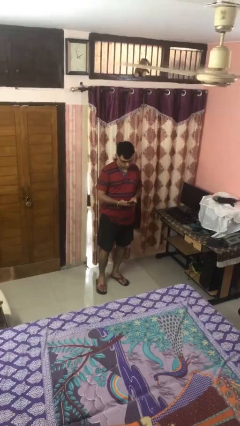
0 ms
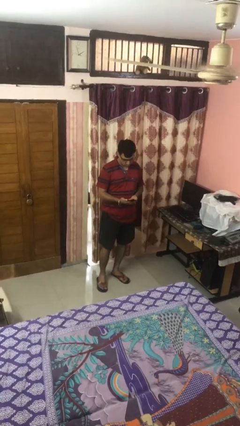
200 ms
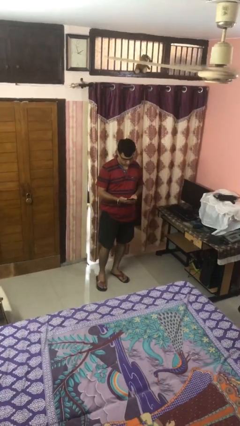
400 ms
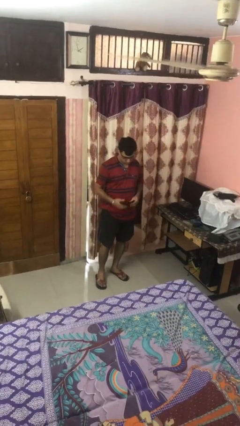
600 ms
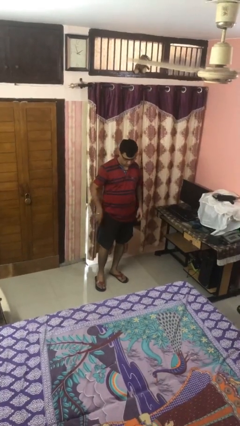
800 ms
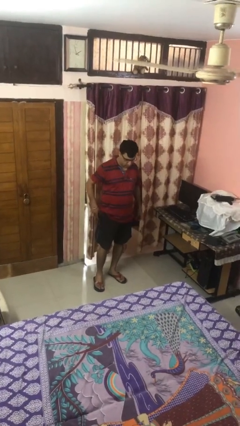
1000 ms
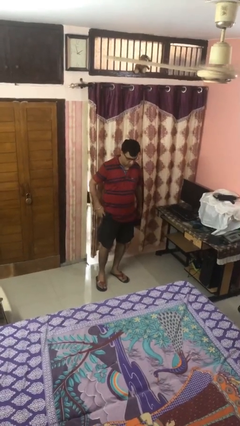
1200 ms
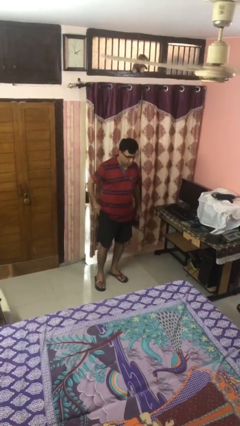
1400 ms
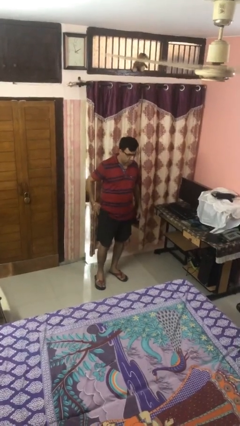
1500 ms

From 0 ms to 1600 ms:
person puts phone into pocket

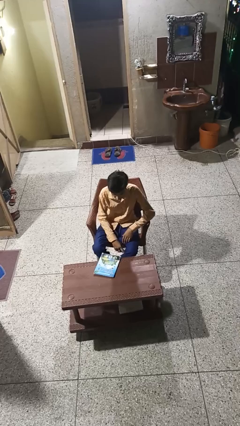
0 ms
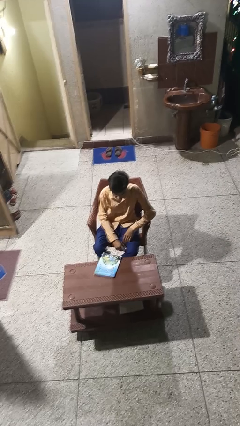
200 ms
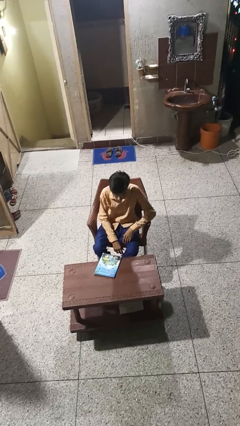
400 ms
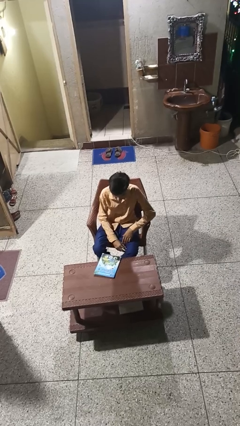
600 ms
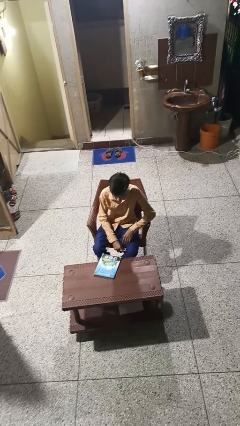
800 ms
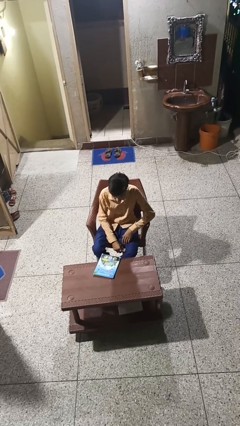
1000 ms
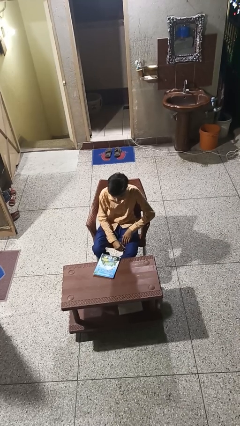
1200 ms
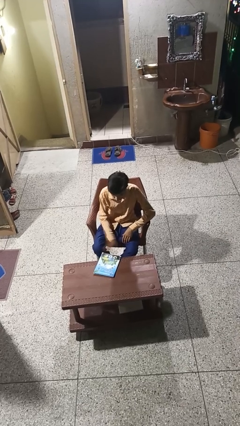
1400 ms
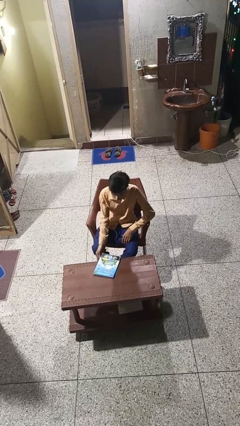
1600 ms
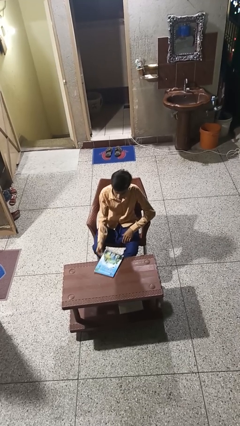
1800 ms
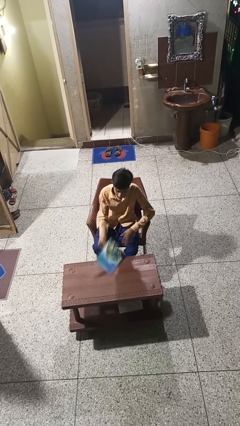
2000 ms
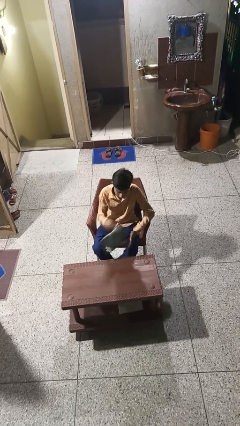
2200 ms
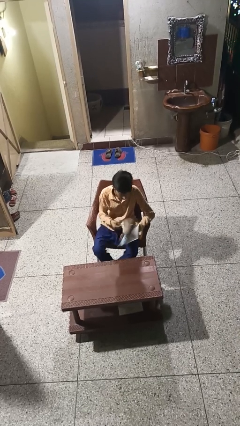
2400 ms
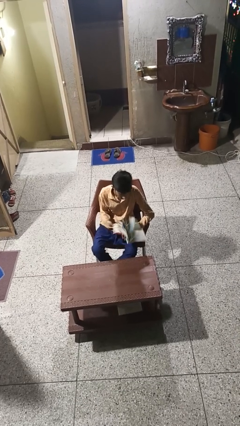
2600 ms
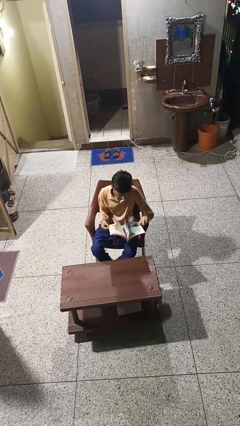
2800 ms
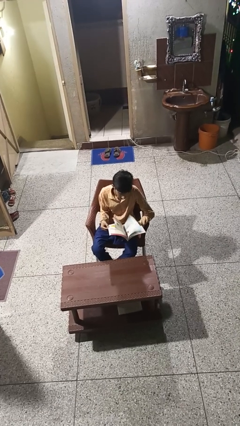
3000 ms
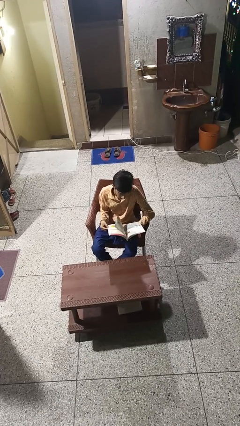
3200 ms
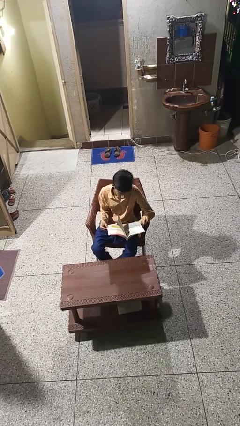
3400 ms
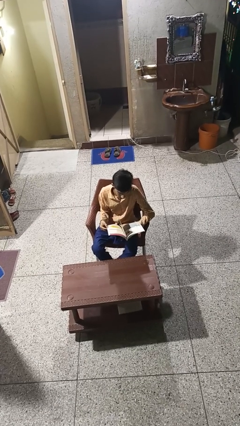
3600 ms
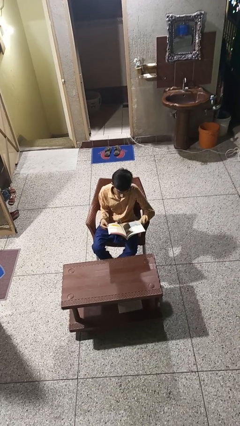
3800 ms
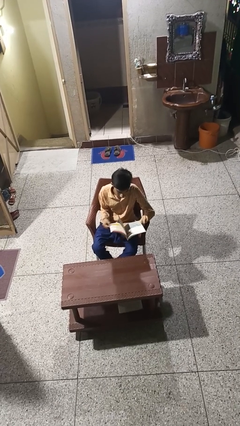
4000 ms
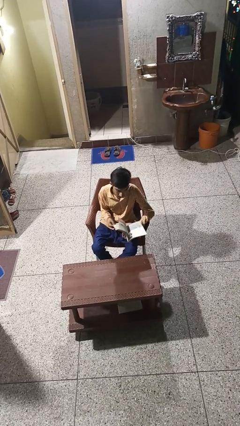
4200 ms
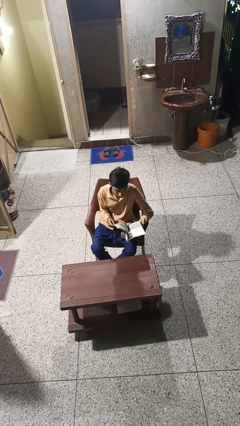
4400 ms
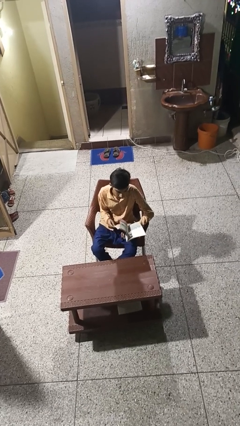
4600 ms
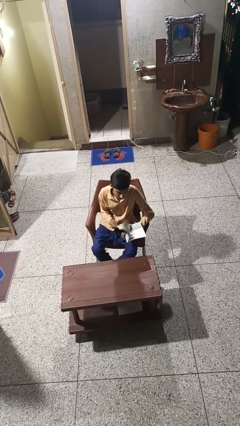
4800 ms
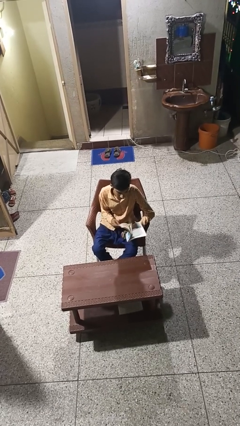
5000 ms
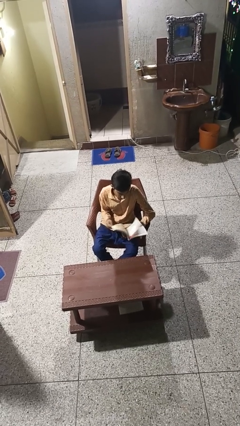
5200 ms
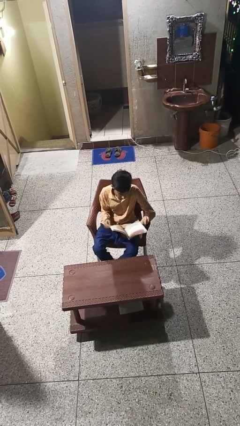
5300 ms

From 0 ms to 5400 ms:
person reads book

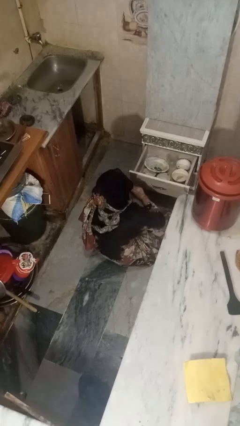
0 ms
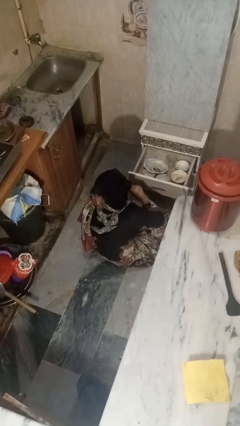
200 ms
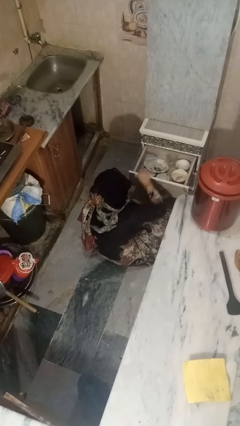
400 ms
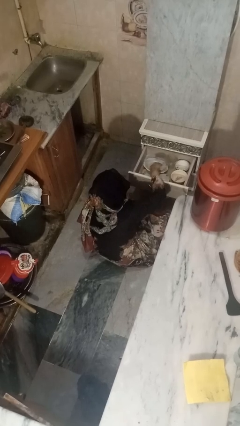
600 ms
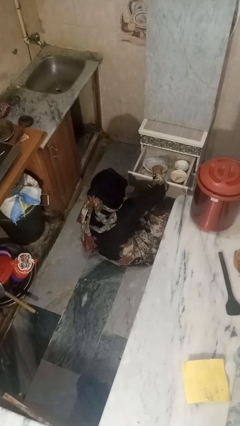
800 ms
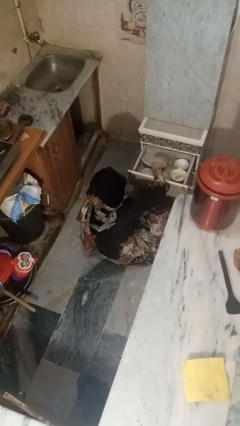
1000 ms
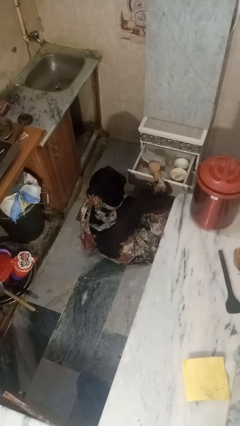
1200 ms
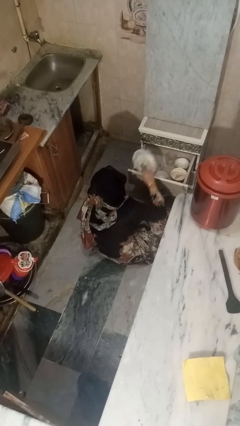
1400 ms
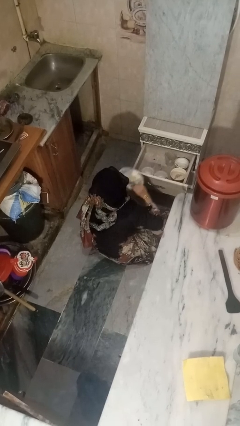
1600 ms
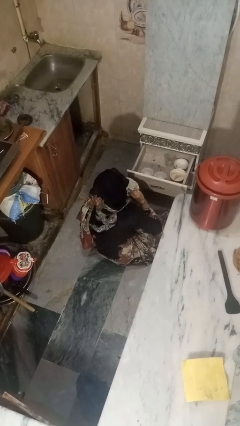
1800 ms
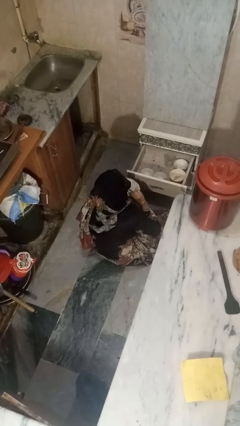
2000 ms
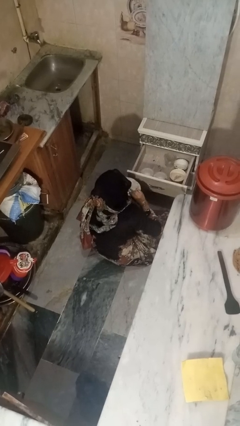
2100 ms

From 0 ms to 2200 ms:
person takes object from kitchen drawer

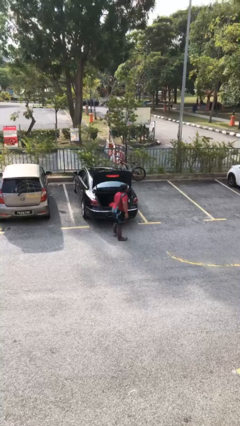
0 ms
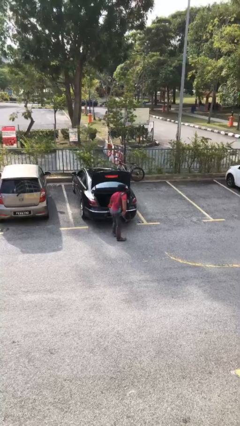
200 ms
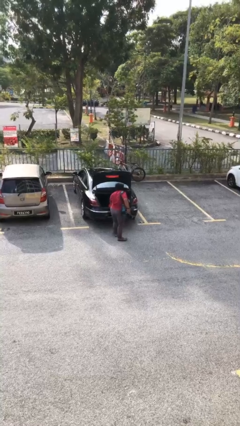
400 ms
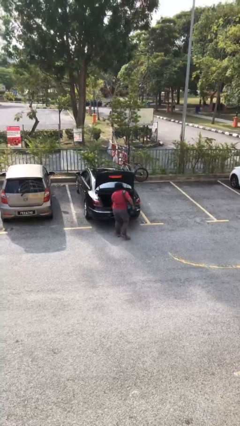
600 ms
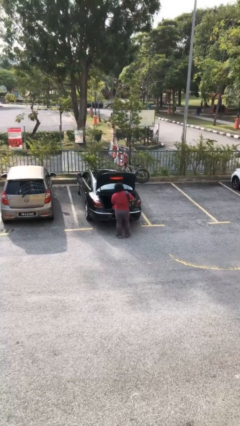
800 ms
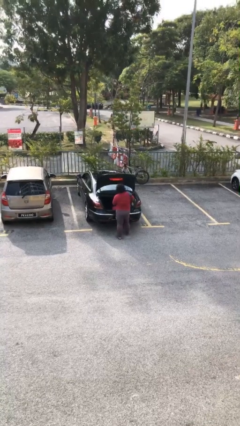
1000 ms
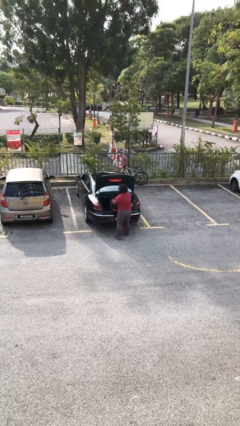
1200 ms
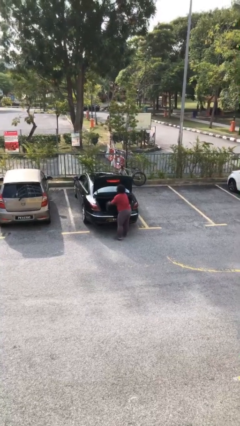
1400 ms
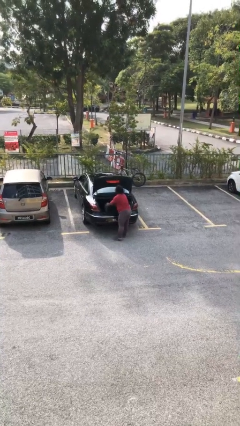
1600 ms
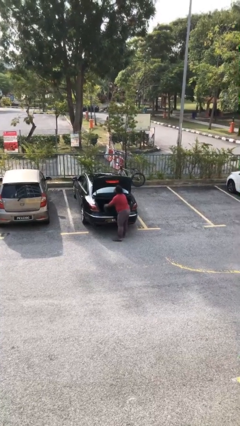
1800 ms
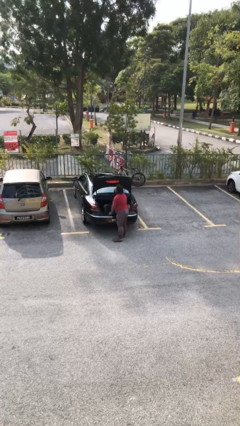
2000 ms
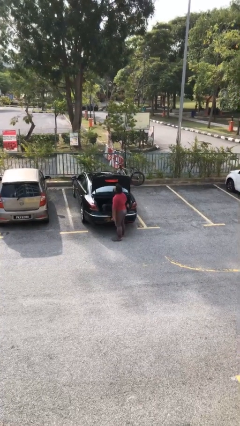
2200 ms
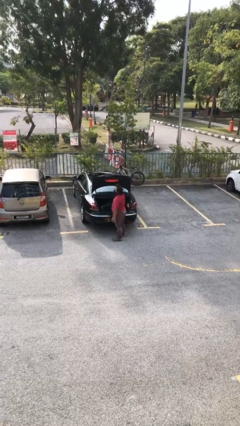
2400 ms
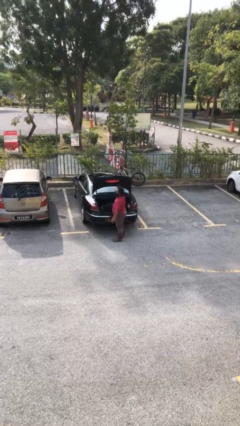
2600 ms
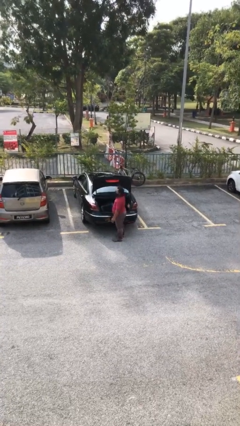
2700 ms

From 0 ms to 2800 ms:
person loads car

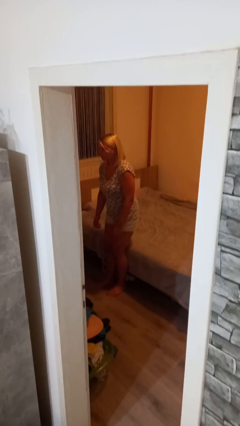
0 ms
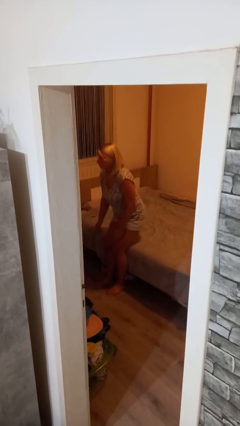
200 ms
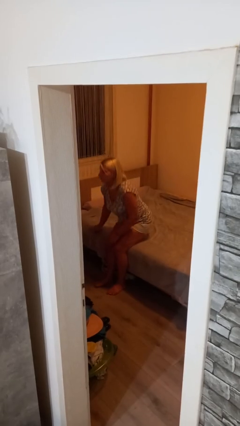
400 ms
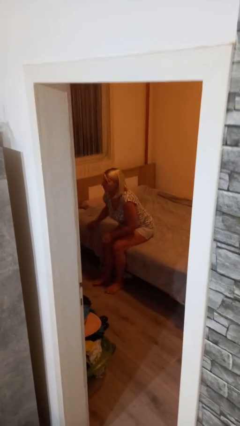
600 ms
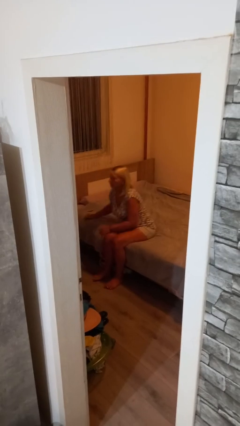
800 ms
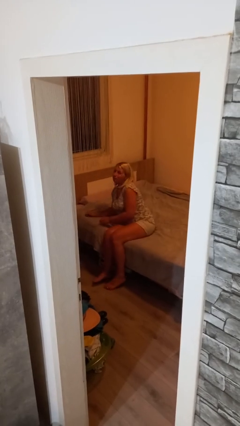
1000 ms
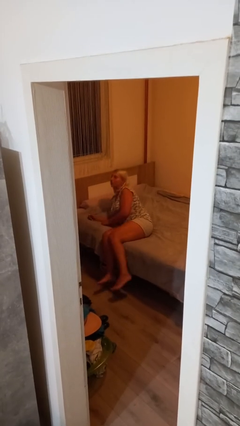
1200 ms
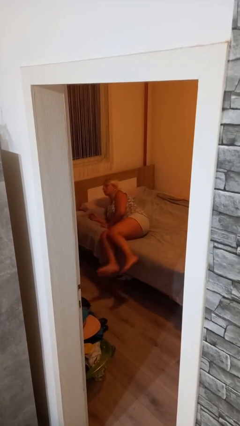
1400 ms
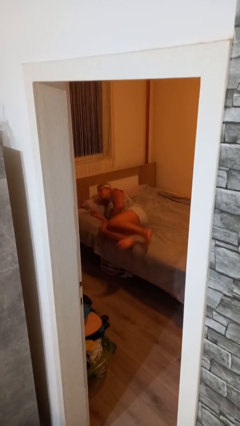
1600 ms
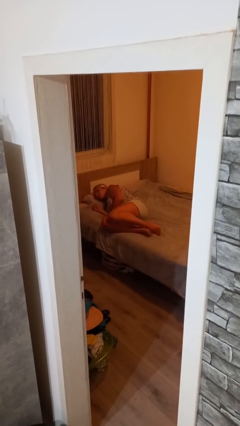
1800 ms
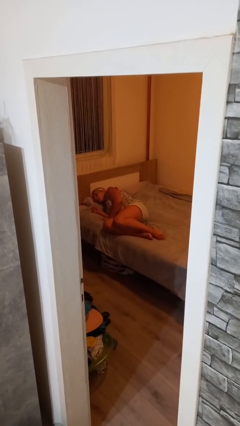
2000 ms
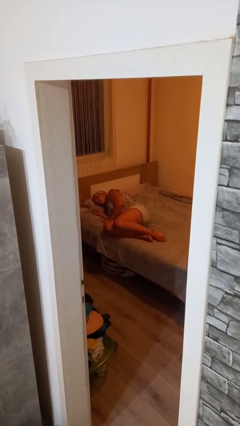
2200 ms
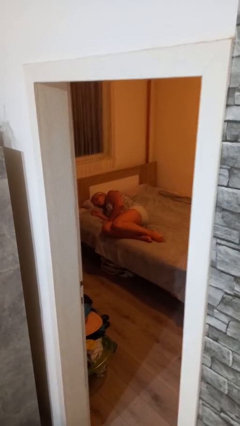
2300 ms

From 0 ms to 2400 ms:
person lies down on bed

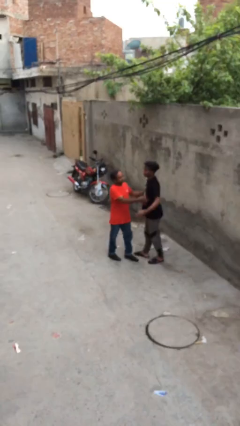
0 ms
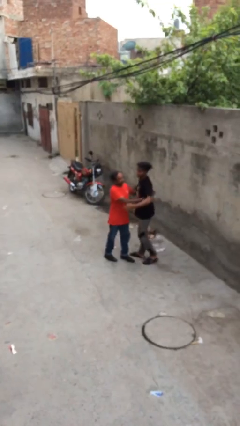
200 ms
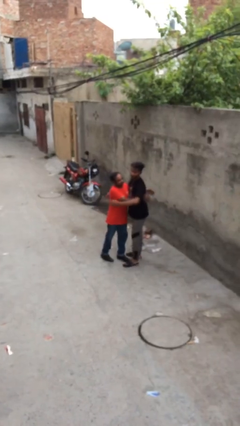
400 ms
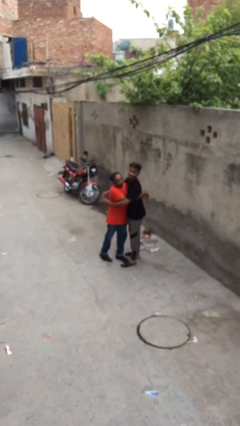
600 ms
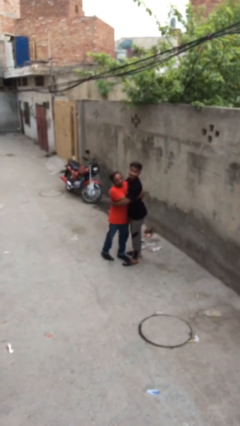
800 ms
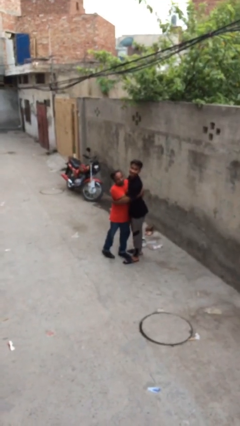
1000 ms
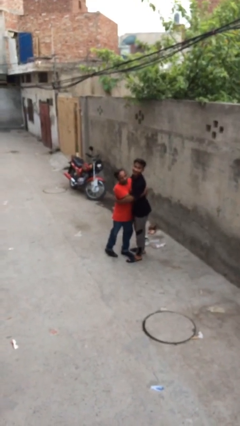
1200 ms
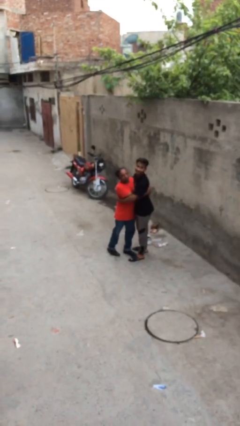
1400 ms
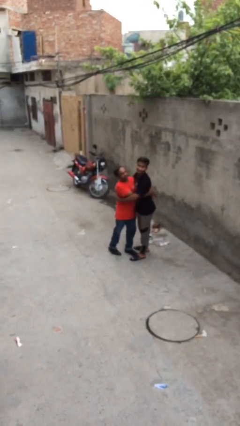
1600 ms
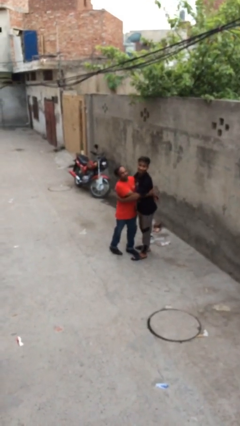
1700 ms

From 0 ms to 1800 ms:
person embraces person

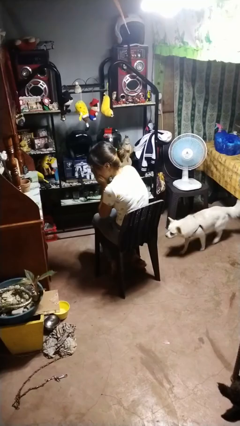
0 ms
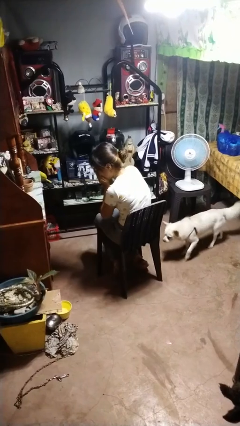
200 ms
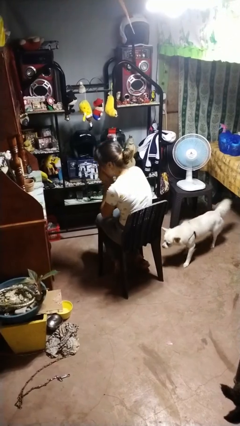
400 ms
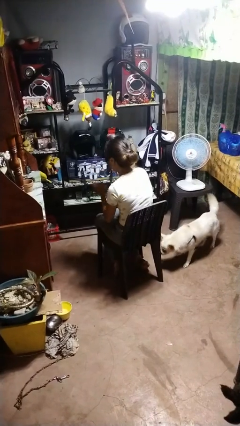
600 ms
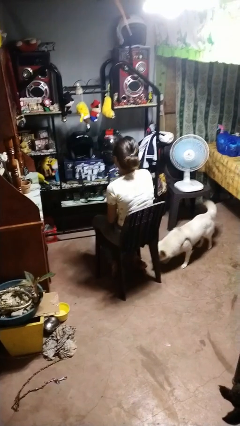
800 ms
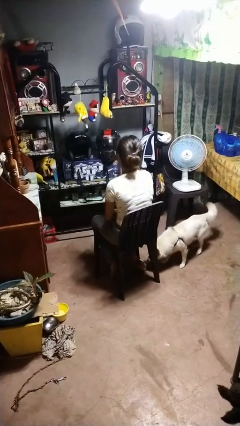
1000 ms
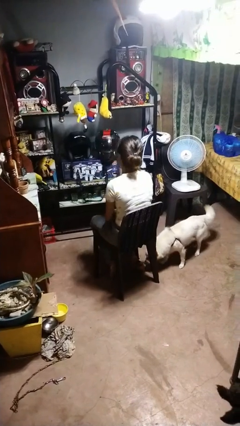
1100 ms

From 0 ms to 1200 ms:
person sneezes into hand
